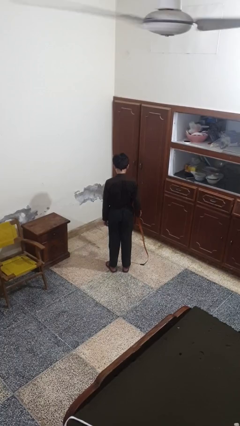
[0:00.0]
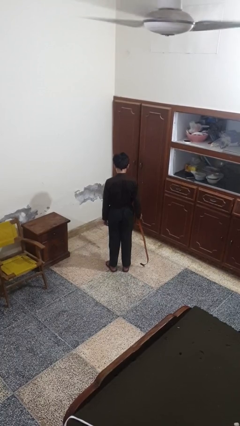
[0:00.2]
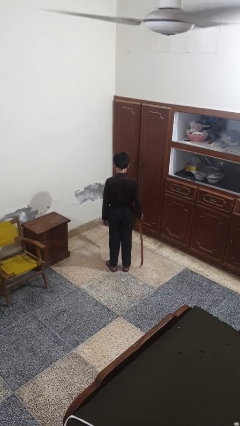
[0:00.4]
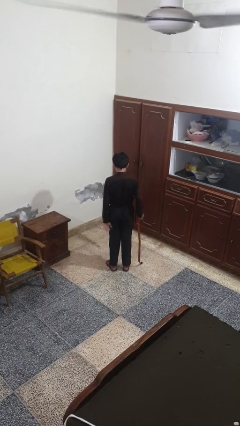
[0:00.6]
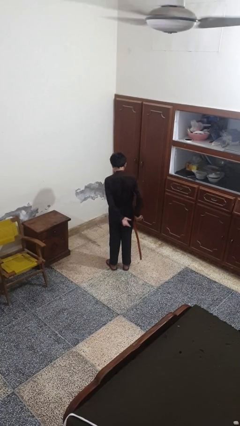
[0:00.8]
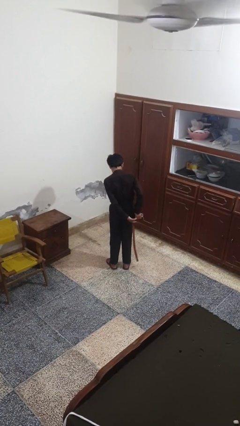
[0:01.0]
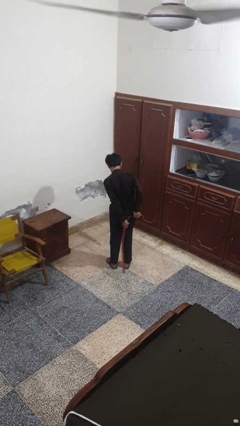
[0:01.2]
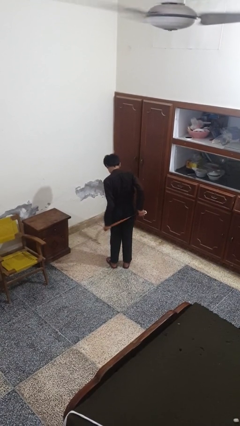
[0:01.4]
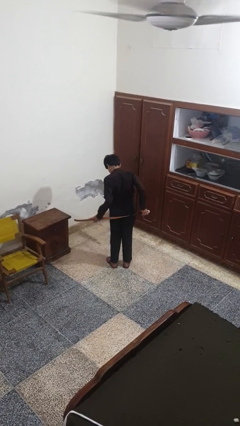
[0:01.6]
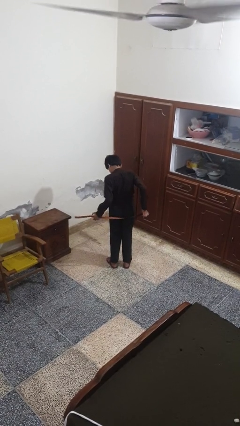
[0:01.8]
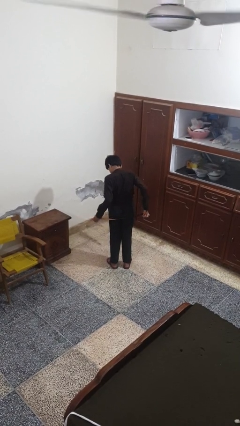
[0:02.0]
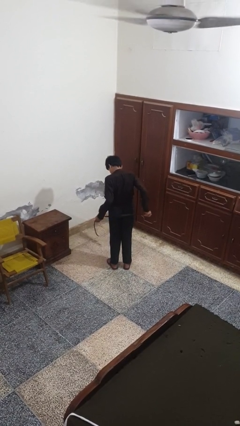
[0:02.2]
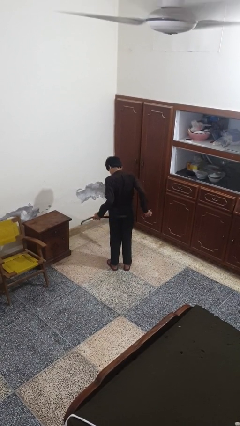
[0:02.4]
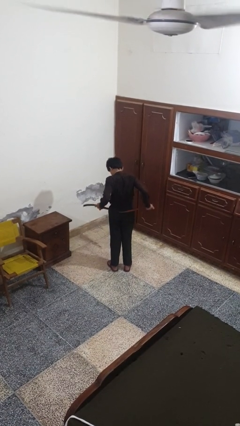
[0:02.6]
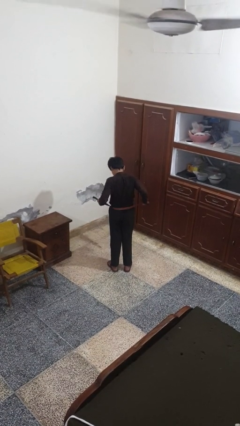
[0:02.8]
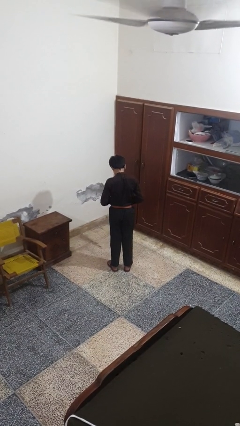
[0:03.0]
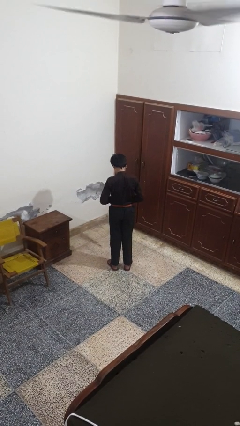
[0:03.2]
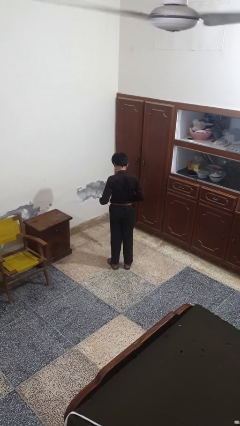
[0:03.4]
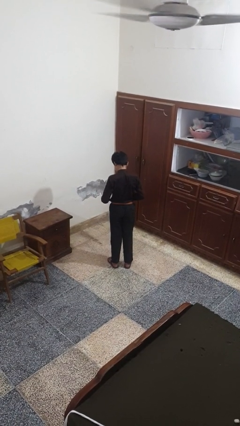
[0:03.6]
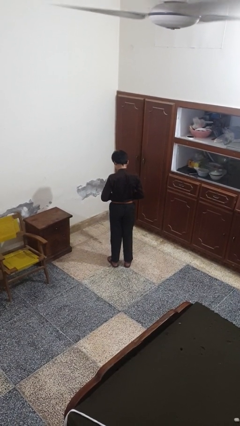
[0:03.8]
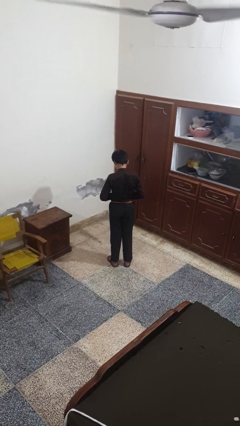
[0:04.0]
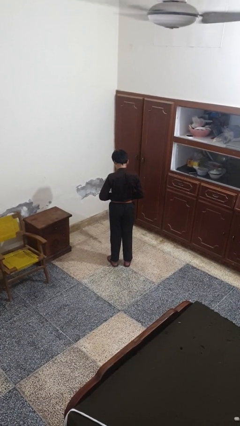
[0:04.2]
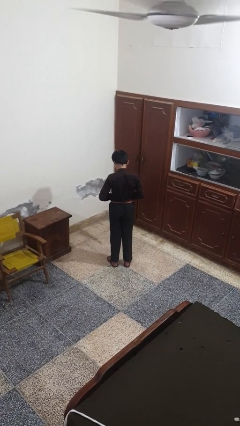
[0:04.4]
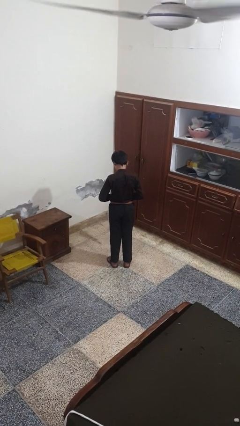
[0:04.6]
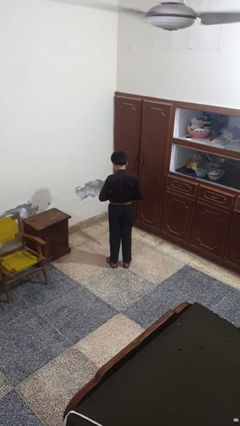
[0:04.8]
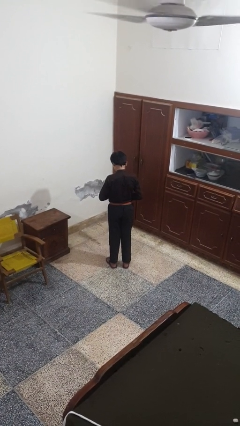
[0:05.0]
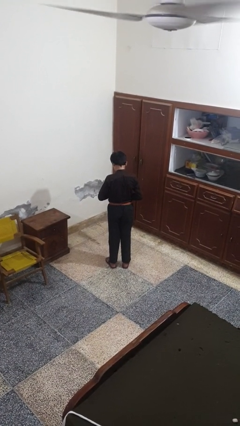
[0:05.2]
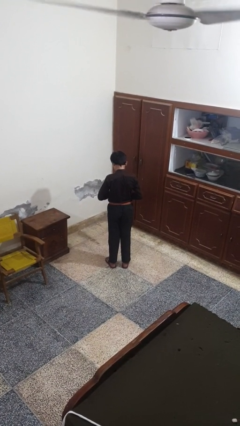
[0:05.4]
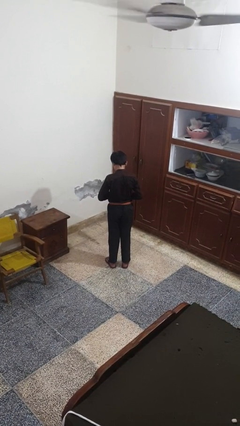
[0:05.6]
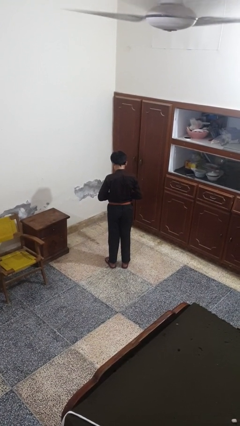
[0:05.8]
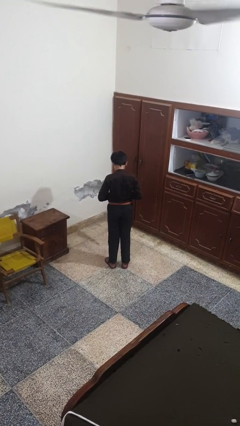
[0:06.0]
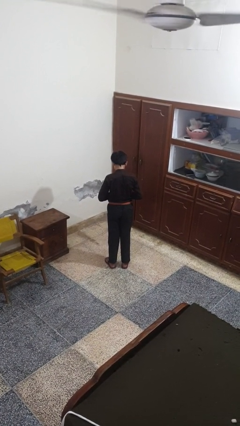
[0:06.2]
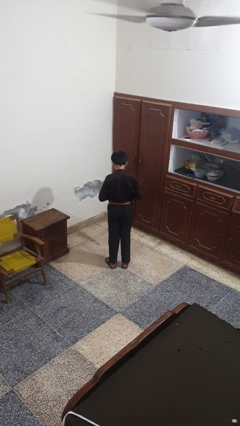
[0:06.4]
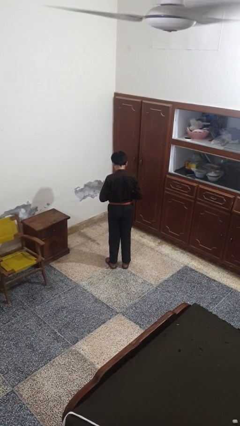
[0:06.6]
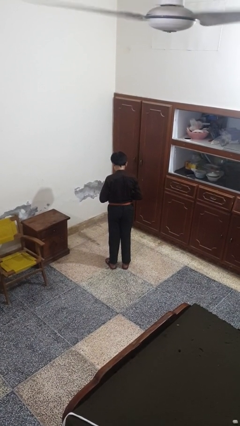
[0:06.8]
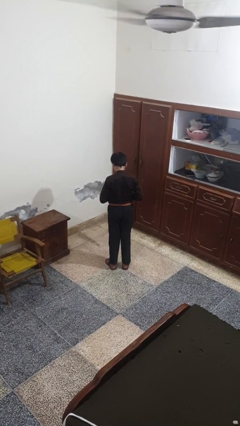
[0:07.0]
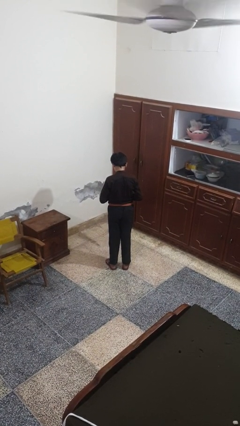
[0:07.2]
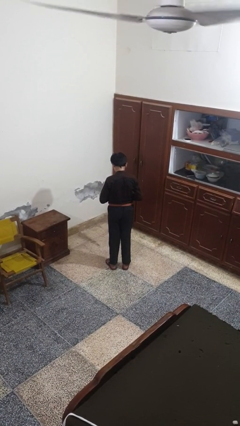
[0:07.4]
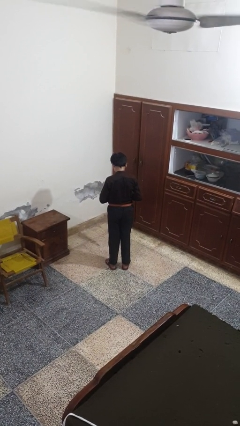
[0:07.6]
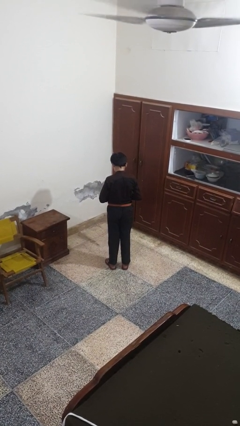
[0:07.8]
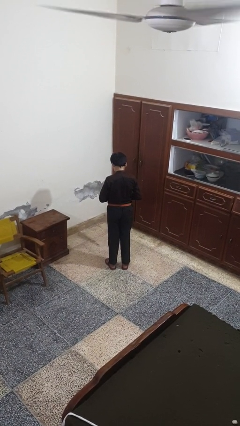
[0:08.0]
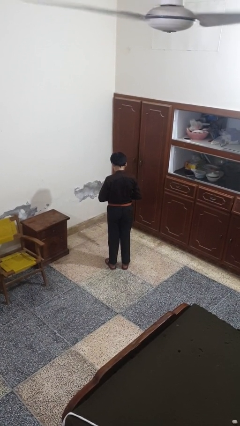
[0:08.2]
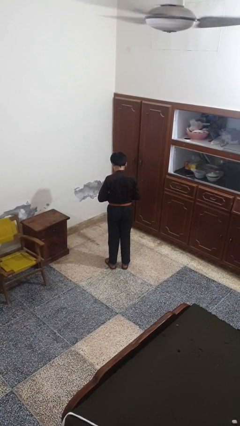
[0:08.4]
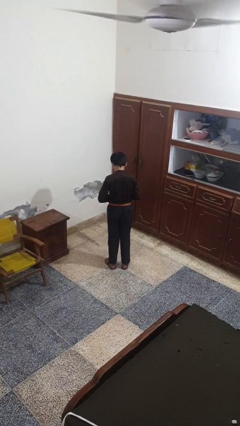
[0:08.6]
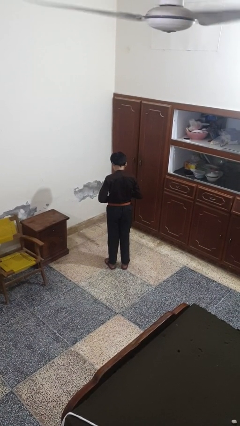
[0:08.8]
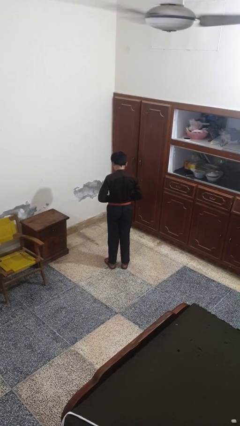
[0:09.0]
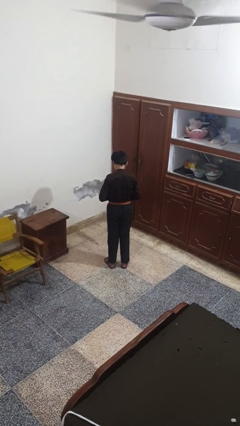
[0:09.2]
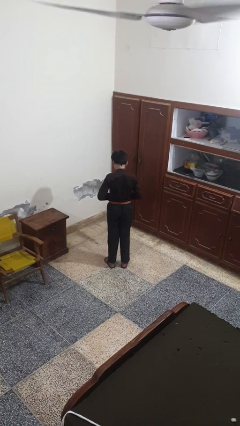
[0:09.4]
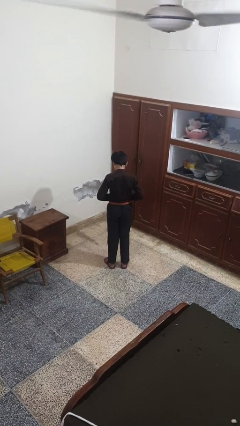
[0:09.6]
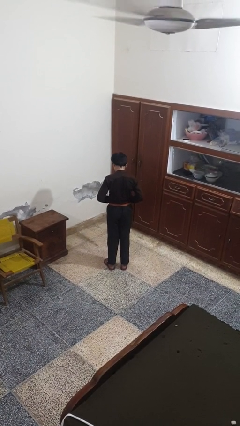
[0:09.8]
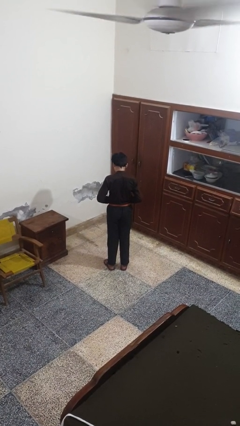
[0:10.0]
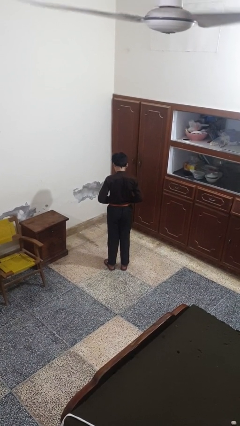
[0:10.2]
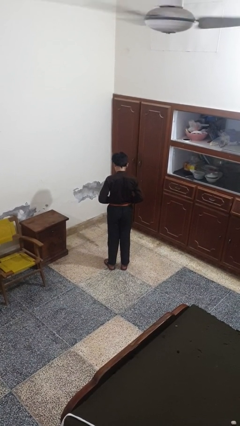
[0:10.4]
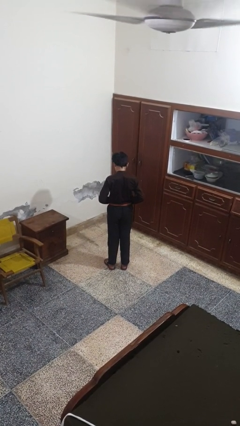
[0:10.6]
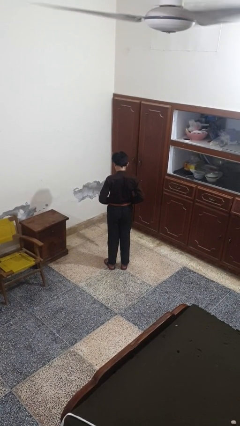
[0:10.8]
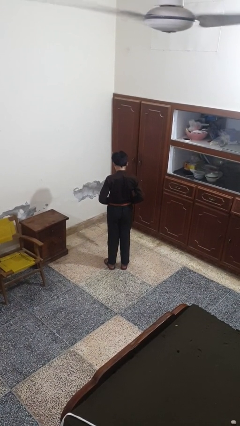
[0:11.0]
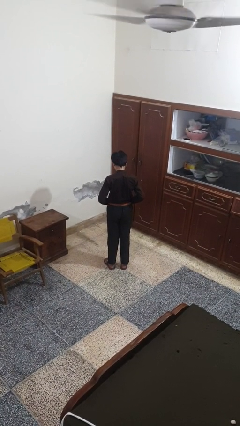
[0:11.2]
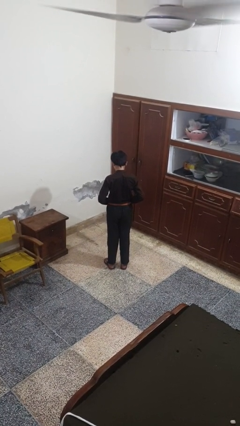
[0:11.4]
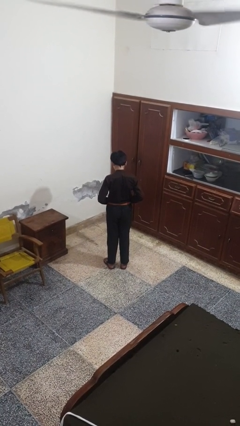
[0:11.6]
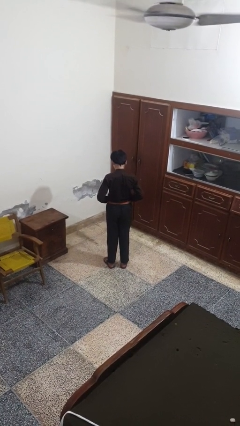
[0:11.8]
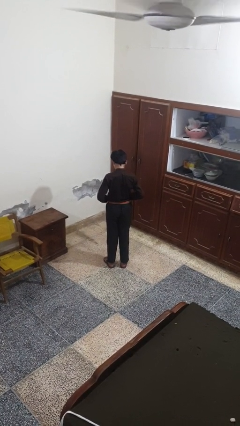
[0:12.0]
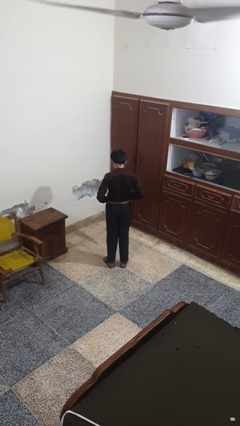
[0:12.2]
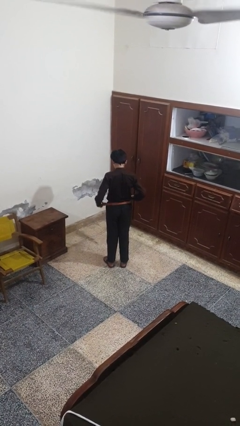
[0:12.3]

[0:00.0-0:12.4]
person puts on belt

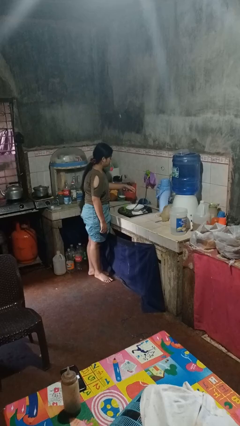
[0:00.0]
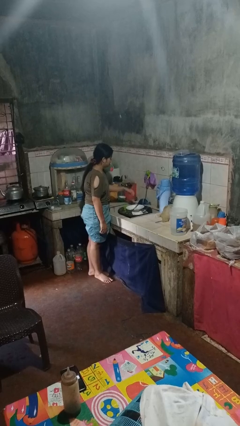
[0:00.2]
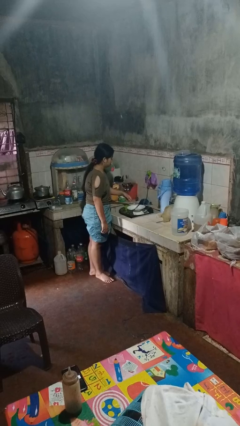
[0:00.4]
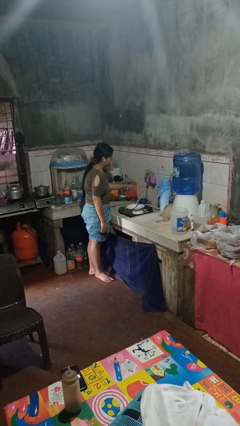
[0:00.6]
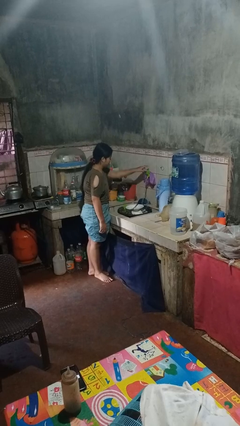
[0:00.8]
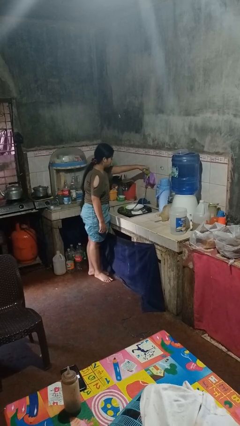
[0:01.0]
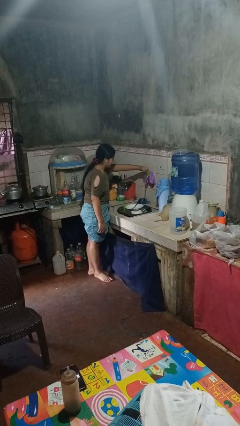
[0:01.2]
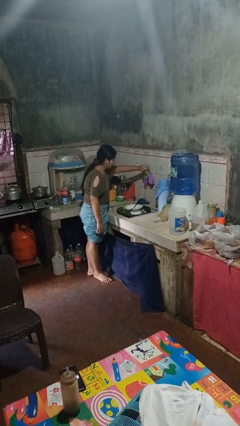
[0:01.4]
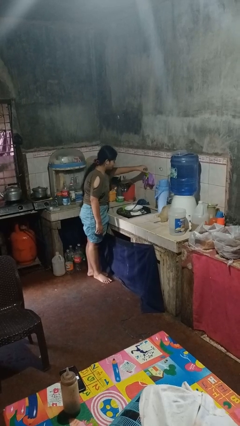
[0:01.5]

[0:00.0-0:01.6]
person turns off faucet

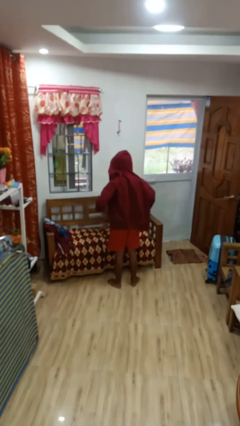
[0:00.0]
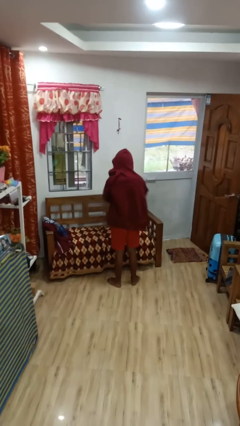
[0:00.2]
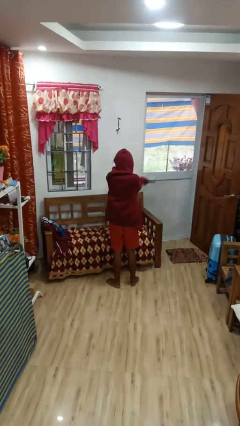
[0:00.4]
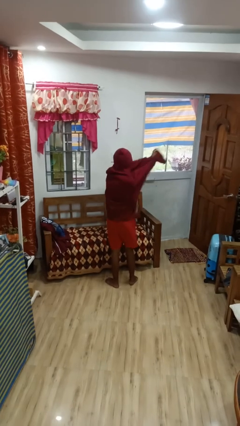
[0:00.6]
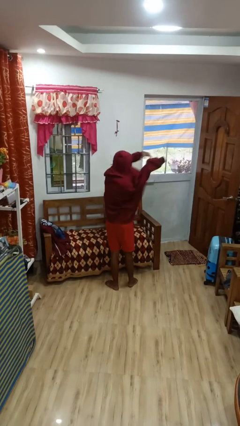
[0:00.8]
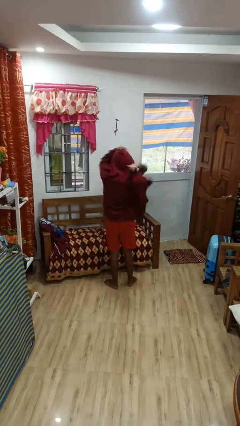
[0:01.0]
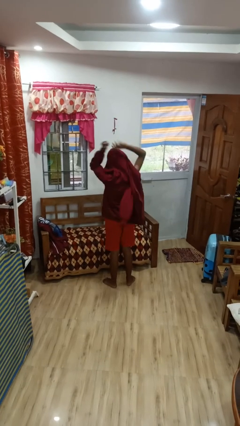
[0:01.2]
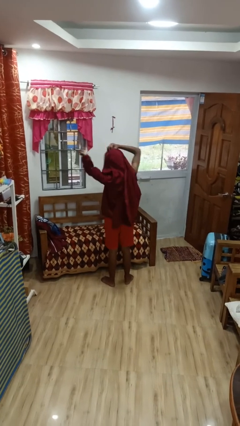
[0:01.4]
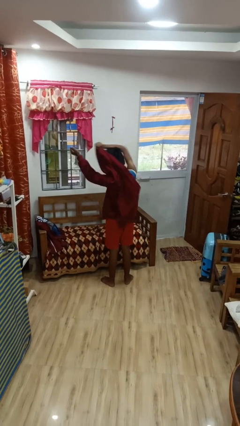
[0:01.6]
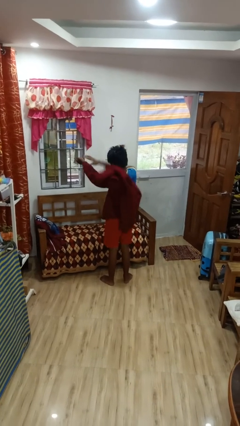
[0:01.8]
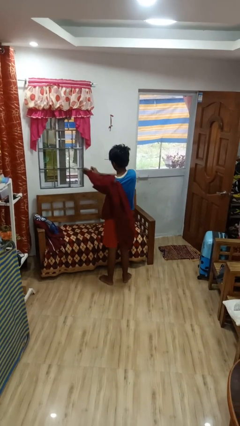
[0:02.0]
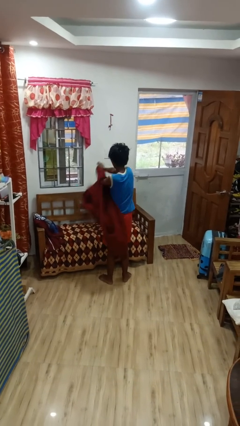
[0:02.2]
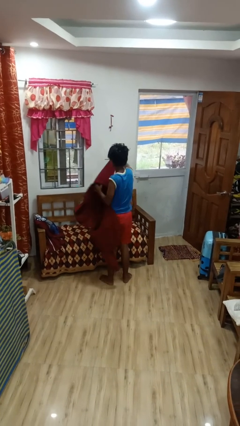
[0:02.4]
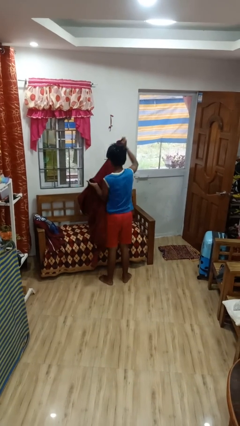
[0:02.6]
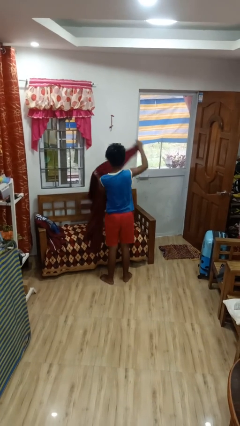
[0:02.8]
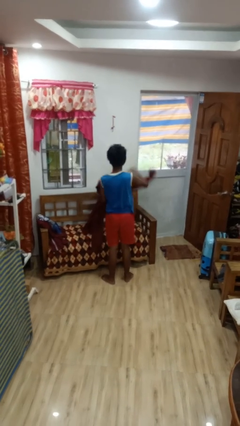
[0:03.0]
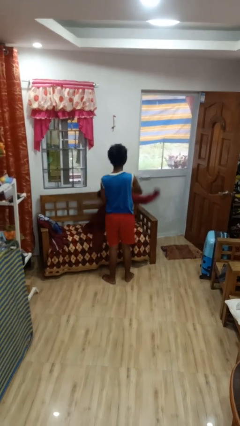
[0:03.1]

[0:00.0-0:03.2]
person takes off hoodie

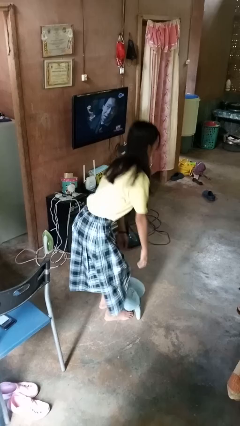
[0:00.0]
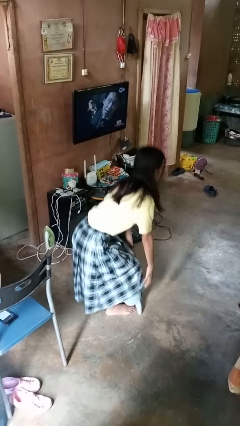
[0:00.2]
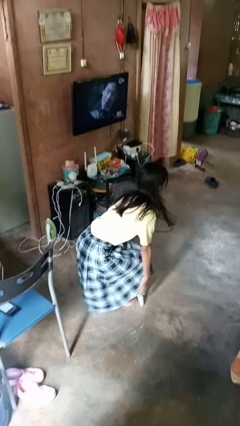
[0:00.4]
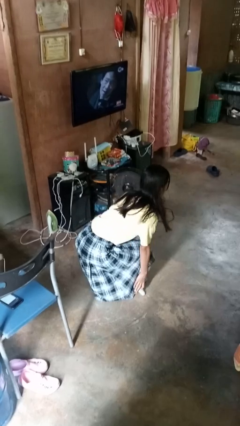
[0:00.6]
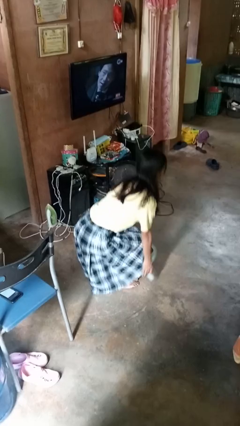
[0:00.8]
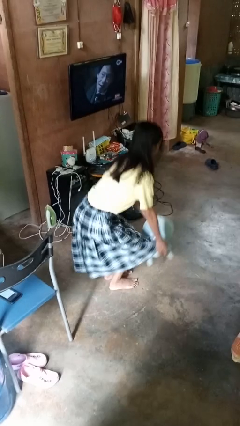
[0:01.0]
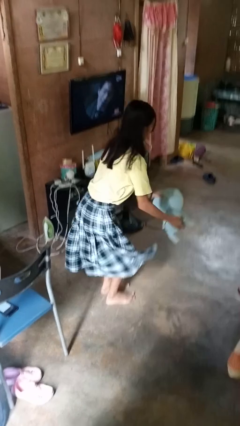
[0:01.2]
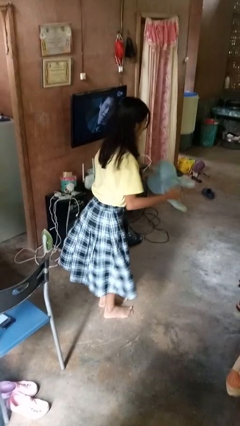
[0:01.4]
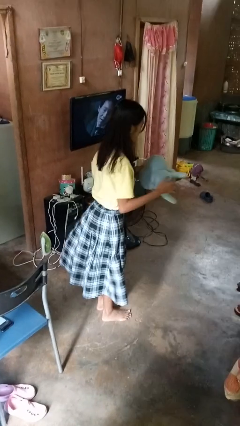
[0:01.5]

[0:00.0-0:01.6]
person picks up object from floor
